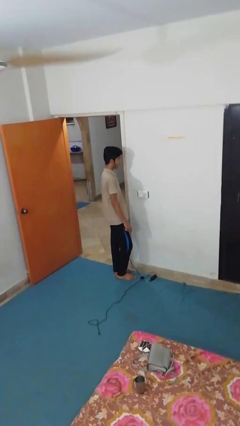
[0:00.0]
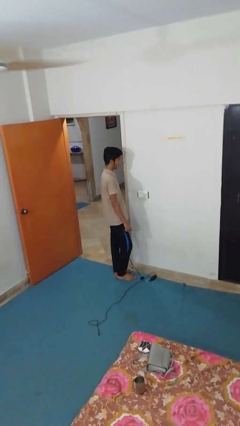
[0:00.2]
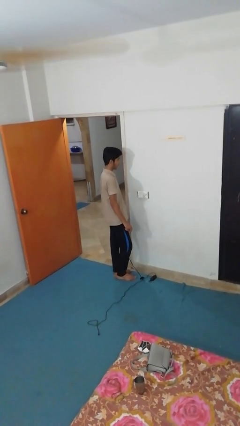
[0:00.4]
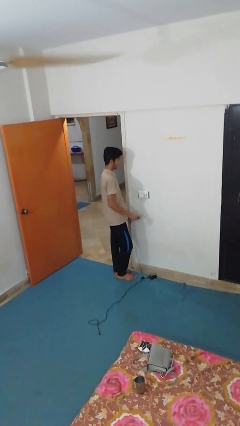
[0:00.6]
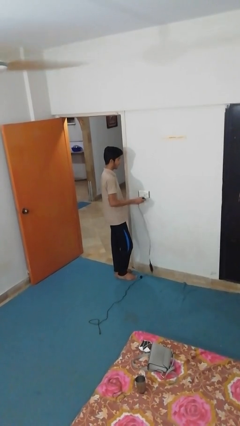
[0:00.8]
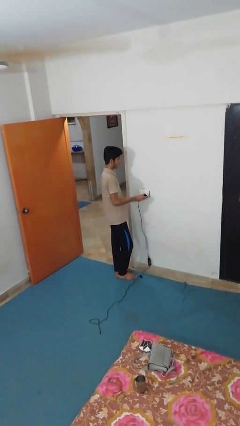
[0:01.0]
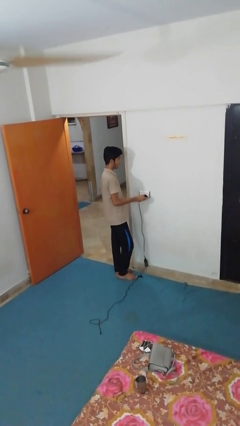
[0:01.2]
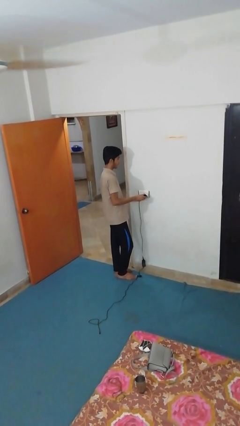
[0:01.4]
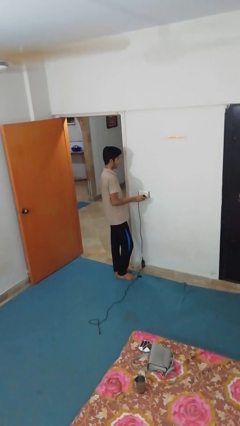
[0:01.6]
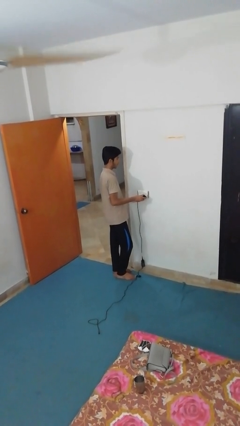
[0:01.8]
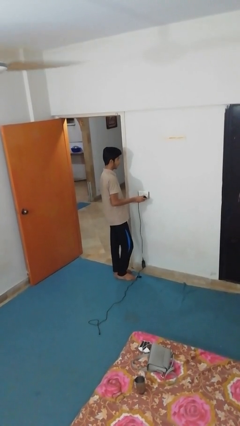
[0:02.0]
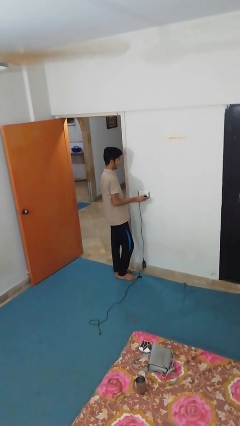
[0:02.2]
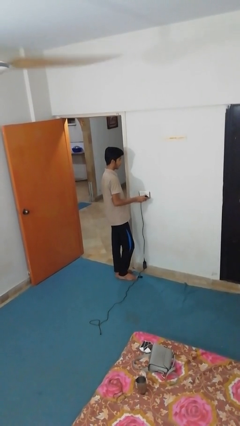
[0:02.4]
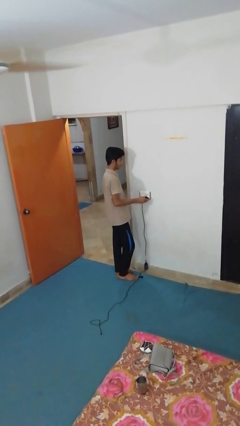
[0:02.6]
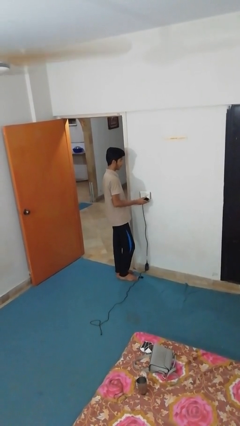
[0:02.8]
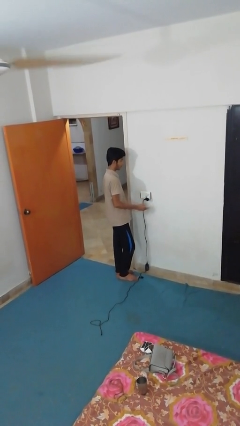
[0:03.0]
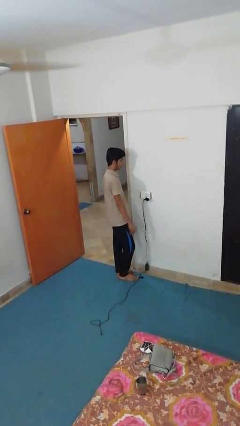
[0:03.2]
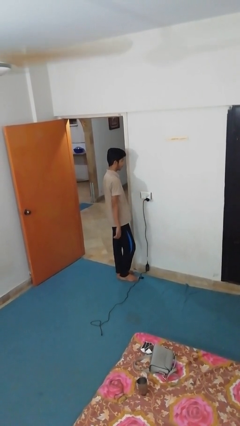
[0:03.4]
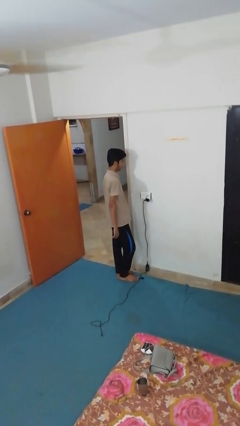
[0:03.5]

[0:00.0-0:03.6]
person plugs into electrical socket

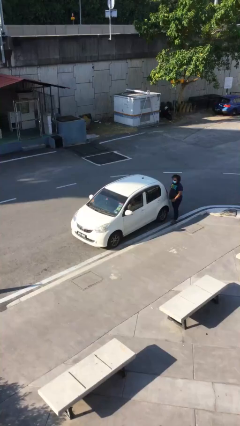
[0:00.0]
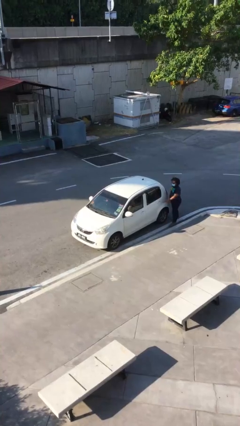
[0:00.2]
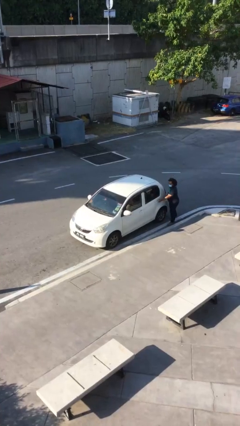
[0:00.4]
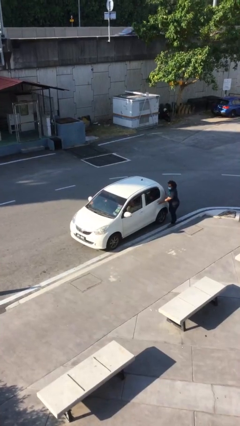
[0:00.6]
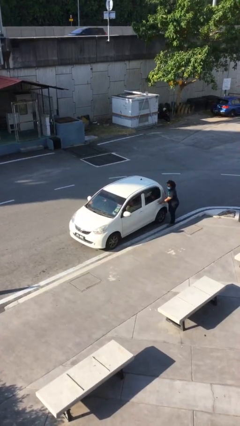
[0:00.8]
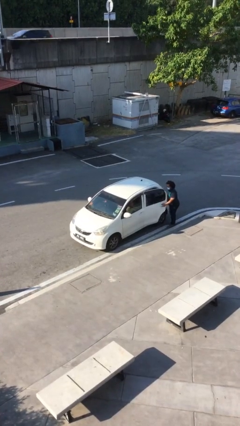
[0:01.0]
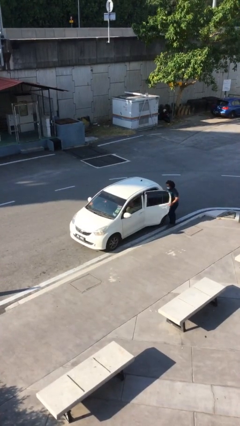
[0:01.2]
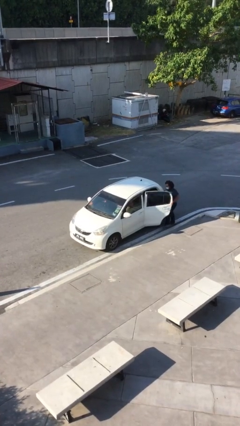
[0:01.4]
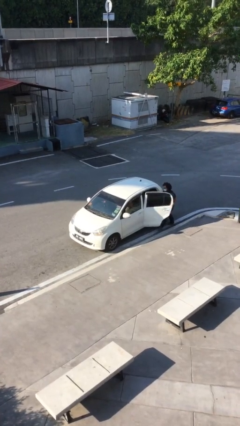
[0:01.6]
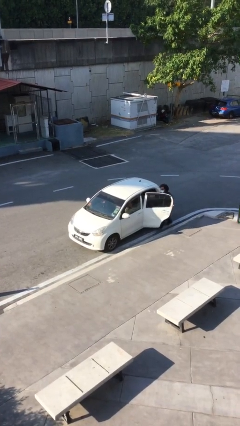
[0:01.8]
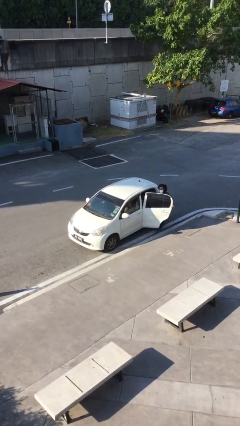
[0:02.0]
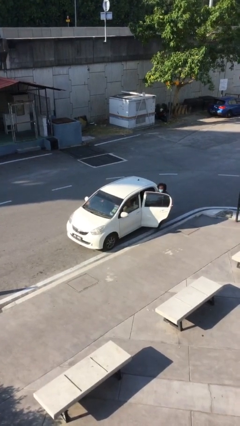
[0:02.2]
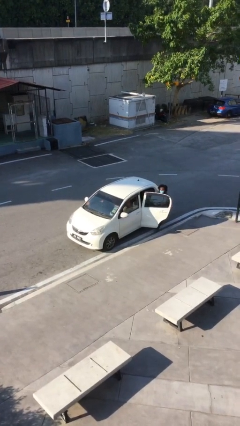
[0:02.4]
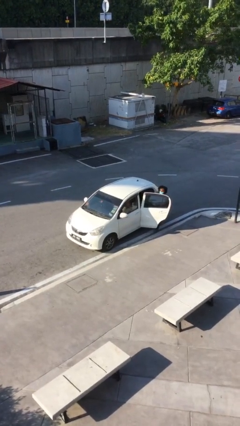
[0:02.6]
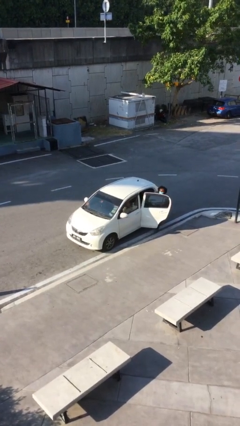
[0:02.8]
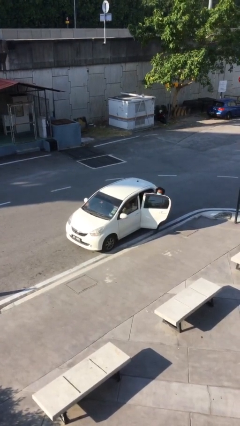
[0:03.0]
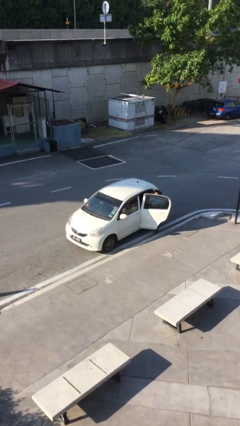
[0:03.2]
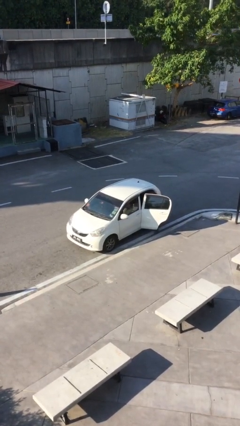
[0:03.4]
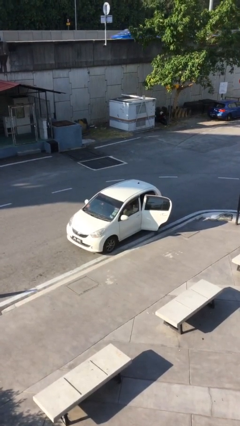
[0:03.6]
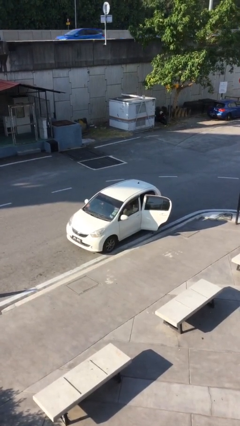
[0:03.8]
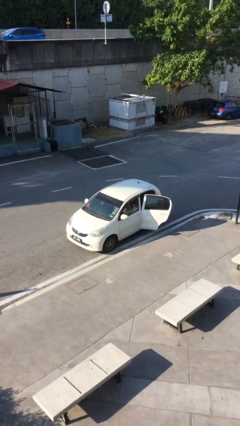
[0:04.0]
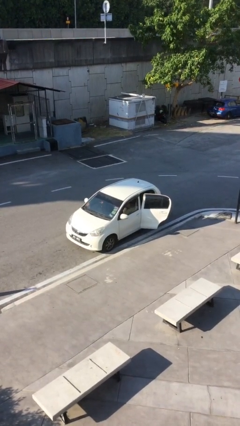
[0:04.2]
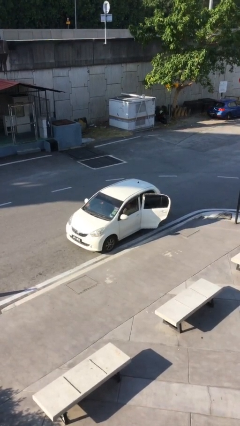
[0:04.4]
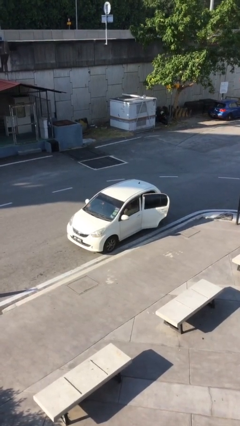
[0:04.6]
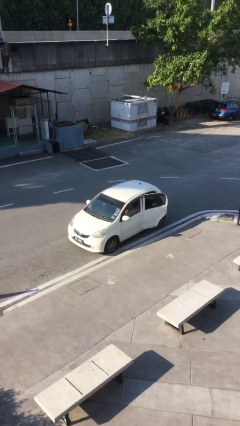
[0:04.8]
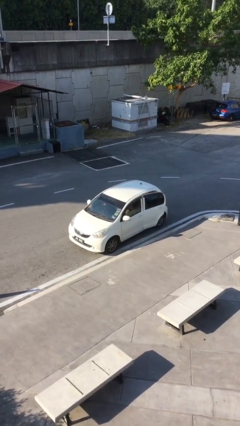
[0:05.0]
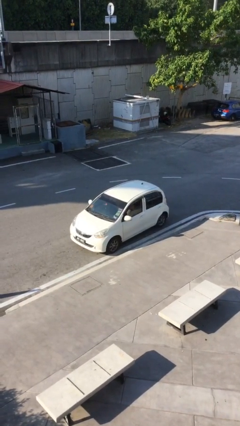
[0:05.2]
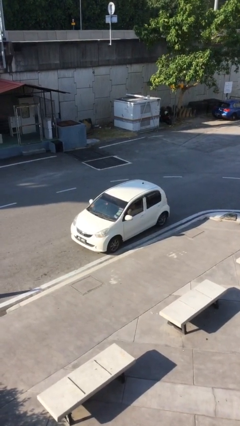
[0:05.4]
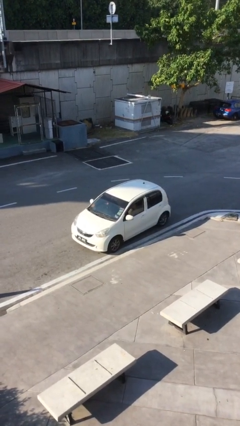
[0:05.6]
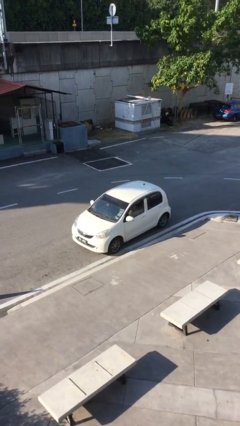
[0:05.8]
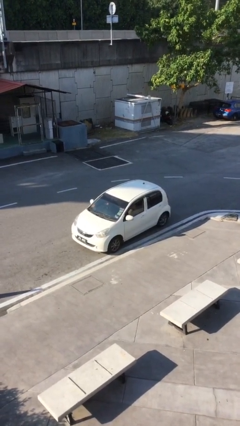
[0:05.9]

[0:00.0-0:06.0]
car picks up person

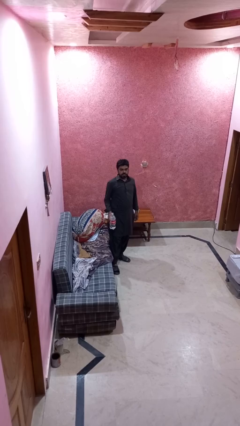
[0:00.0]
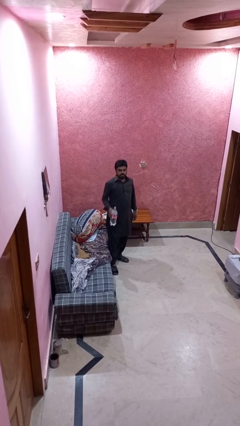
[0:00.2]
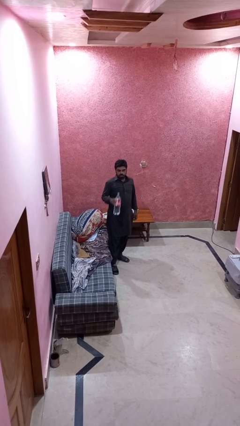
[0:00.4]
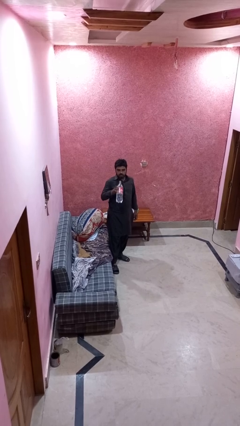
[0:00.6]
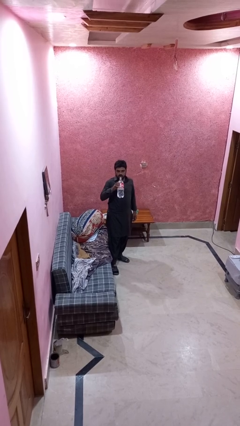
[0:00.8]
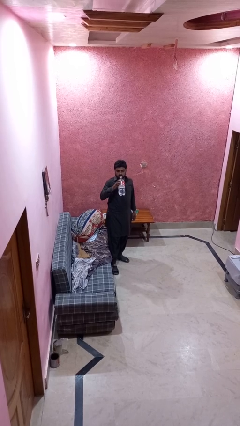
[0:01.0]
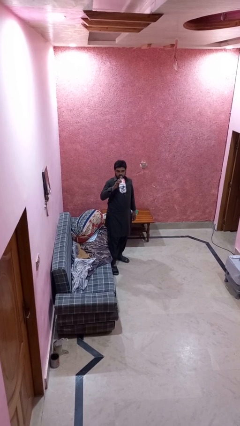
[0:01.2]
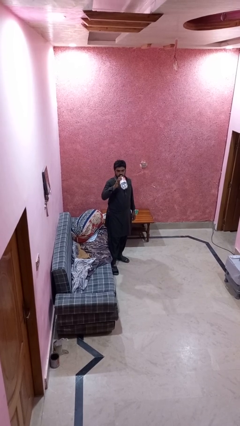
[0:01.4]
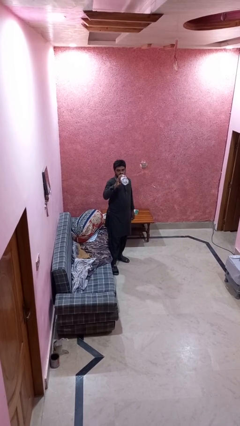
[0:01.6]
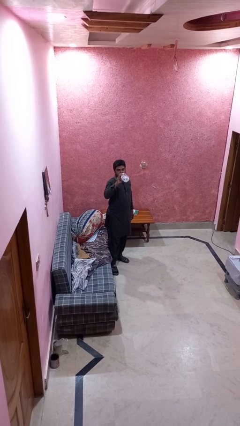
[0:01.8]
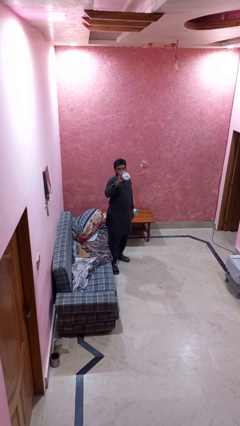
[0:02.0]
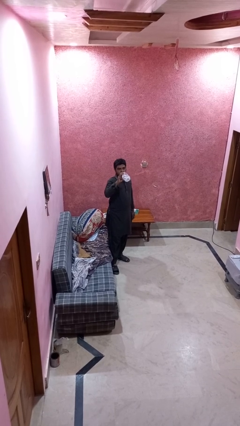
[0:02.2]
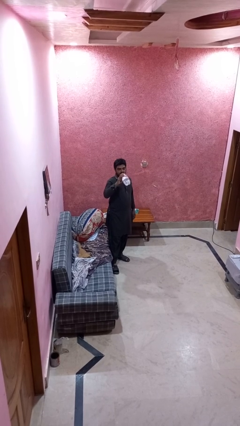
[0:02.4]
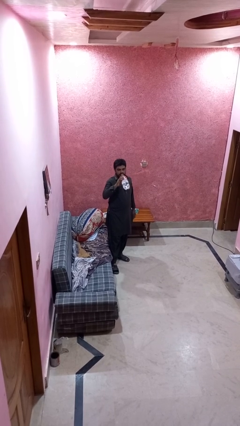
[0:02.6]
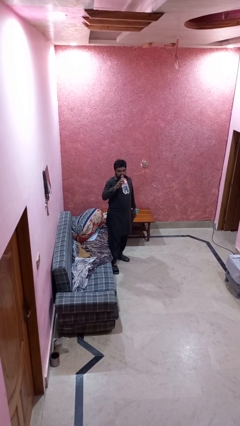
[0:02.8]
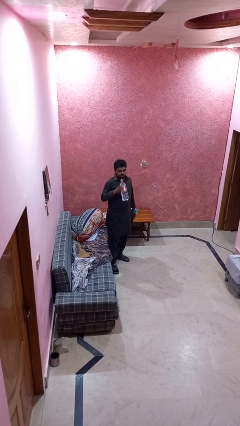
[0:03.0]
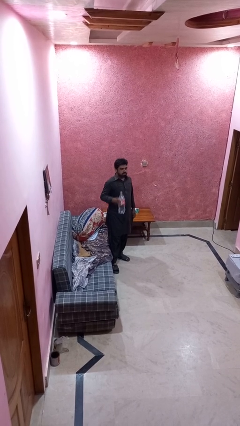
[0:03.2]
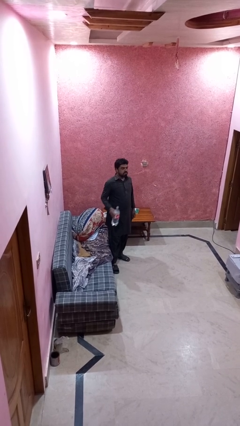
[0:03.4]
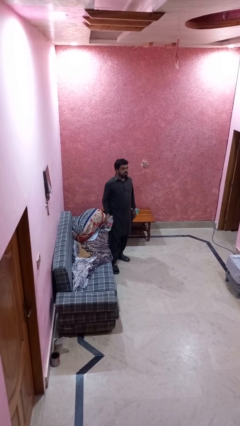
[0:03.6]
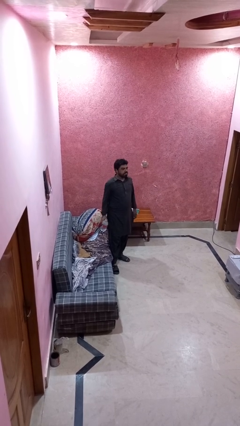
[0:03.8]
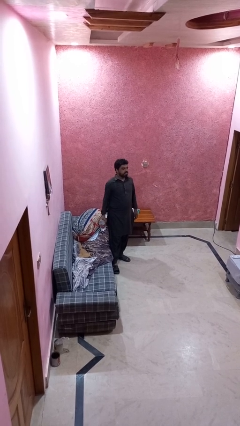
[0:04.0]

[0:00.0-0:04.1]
person drinks from bottle

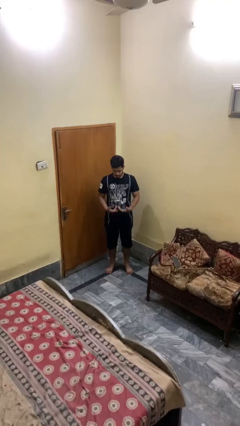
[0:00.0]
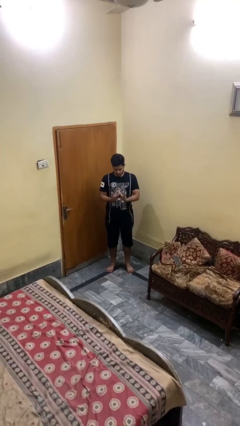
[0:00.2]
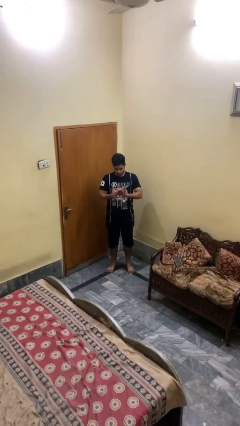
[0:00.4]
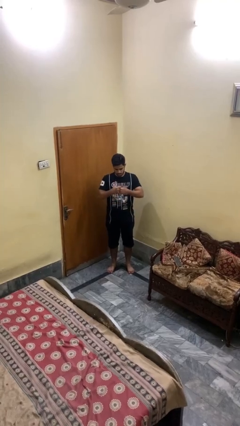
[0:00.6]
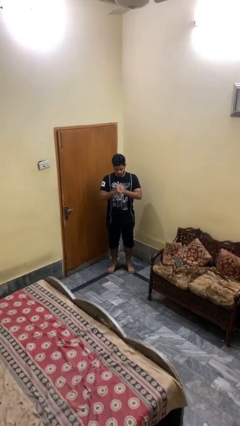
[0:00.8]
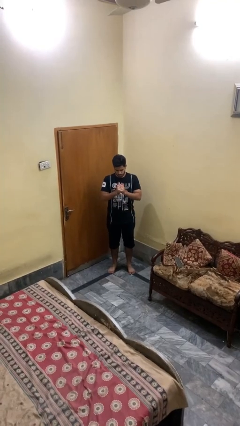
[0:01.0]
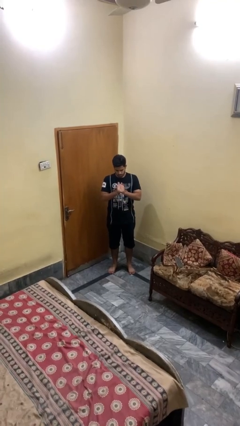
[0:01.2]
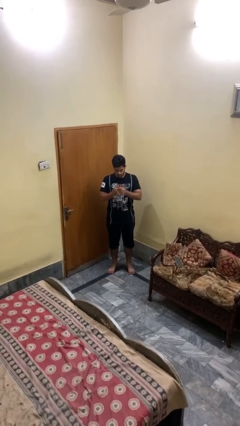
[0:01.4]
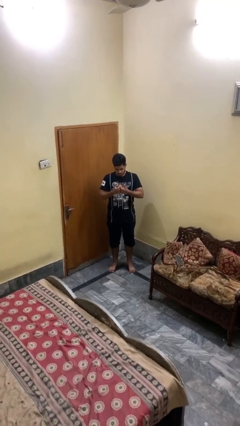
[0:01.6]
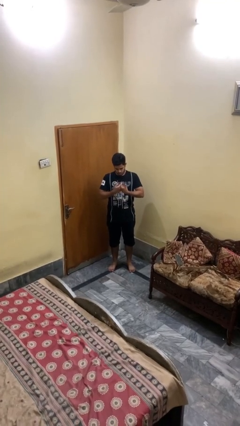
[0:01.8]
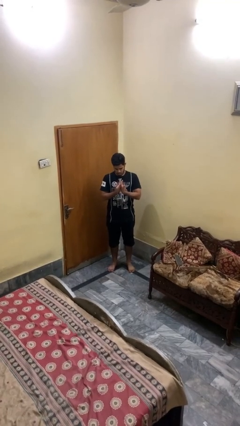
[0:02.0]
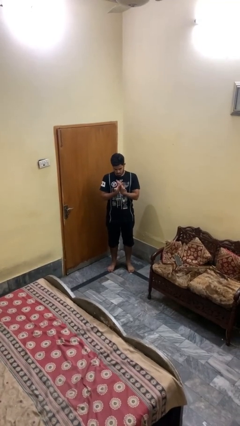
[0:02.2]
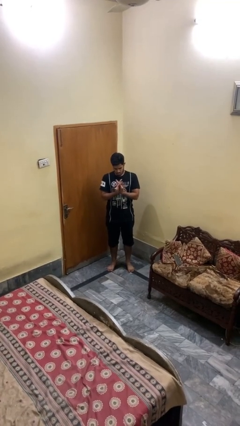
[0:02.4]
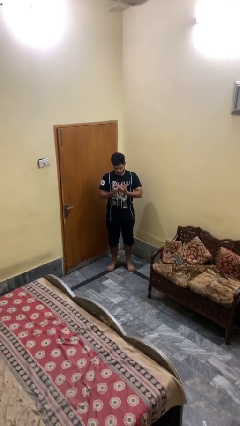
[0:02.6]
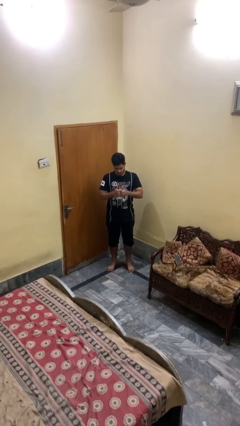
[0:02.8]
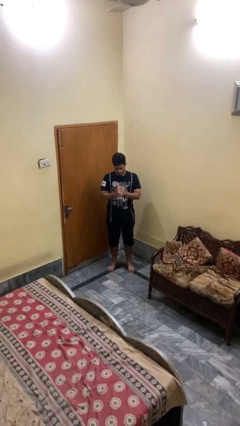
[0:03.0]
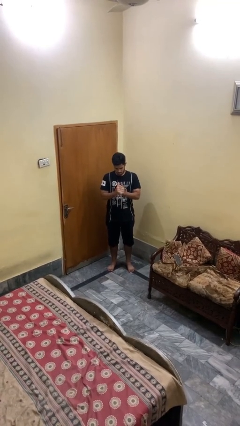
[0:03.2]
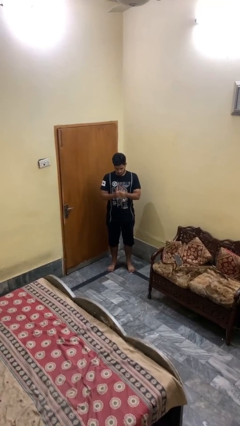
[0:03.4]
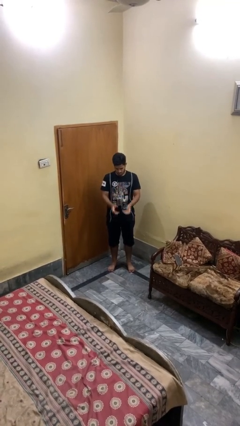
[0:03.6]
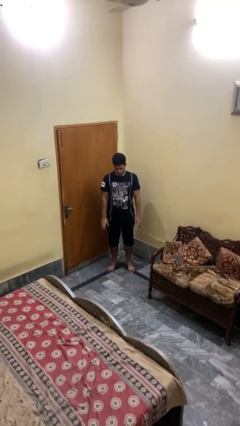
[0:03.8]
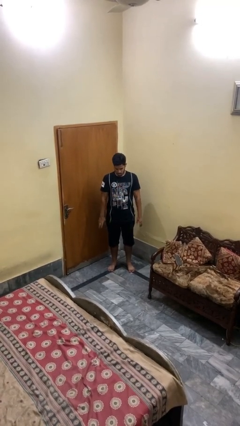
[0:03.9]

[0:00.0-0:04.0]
person cracks knuckles

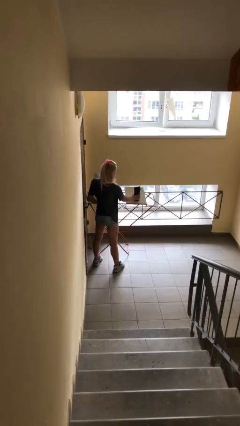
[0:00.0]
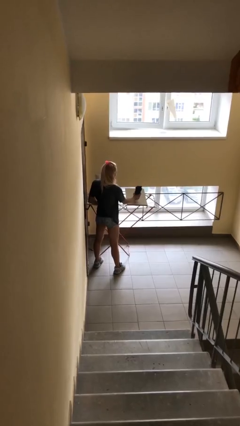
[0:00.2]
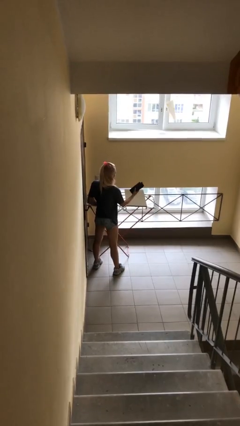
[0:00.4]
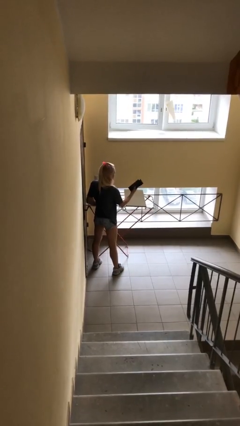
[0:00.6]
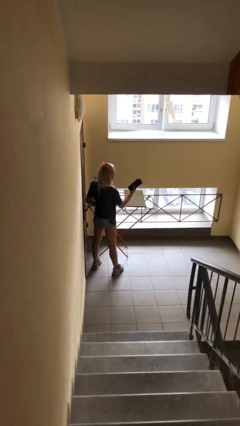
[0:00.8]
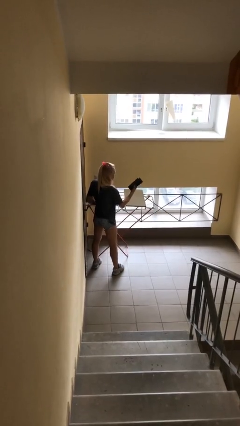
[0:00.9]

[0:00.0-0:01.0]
person picks up object from table
